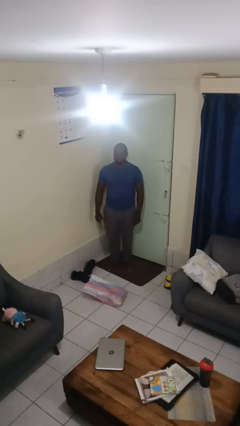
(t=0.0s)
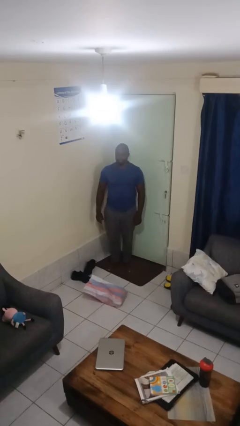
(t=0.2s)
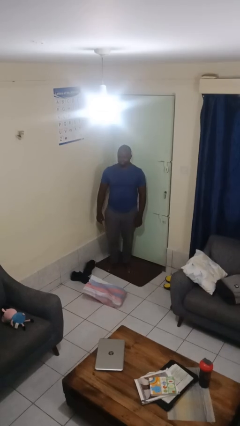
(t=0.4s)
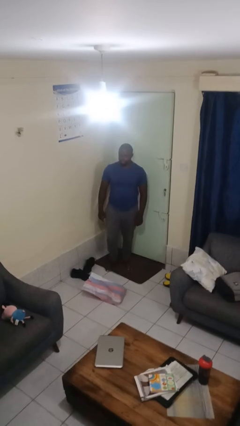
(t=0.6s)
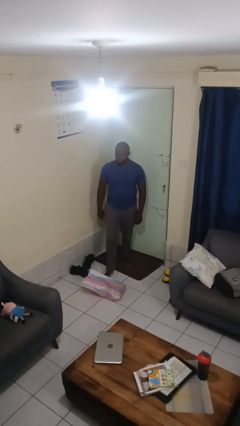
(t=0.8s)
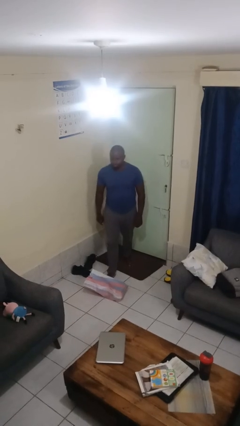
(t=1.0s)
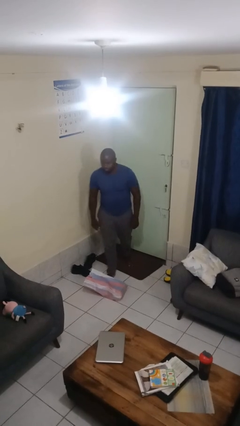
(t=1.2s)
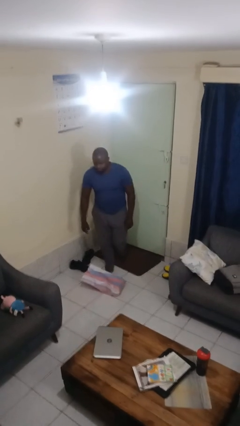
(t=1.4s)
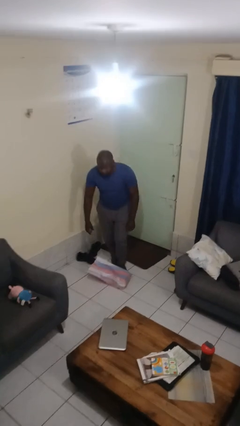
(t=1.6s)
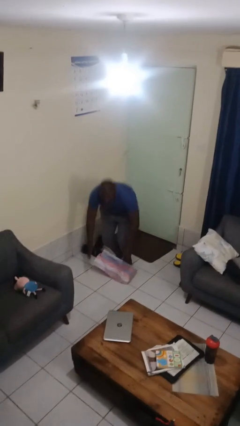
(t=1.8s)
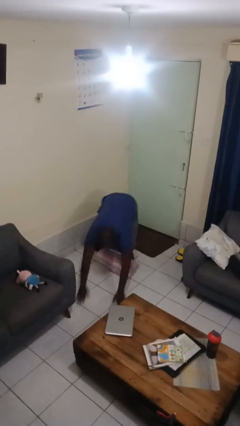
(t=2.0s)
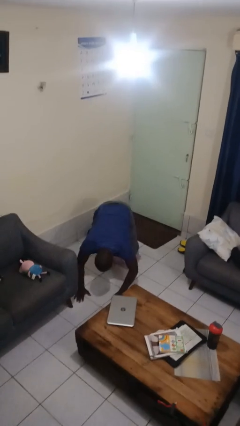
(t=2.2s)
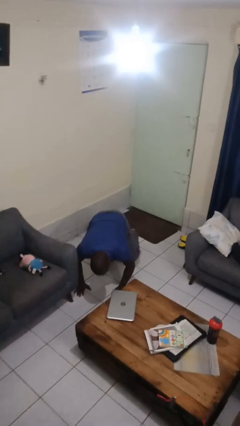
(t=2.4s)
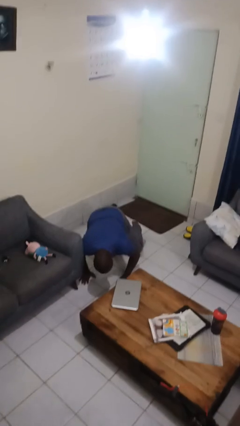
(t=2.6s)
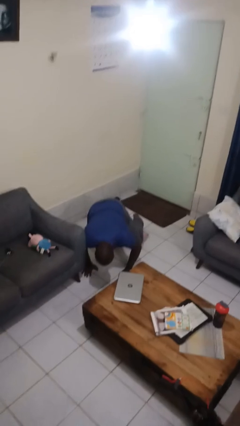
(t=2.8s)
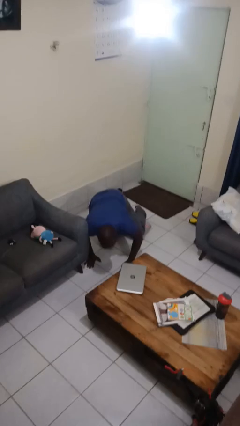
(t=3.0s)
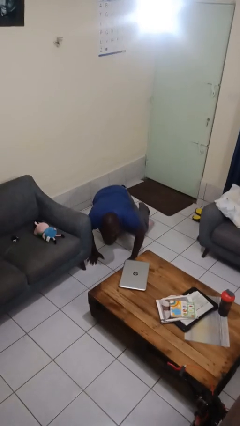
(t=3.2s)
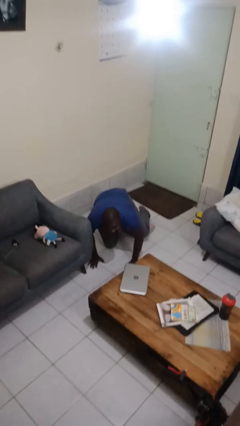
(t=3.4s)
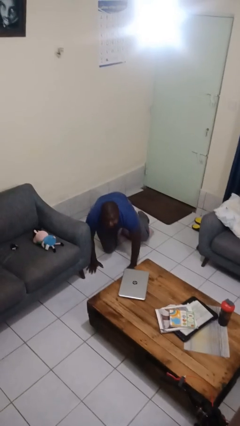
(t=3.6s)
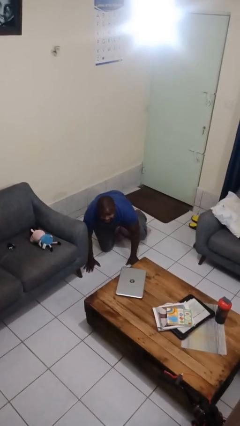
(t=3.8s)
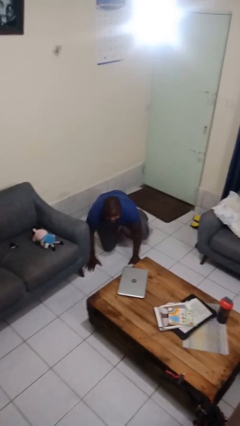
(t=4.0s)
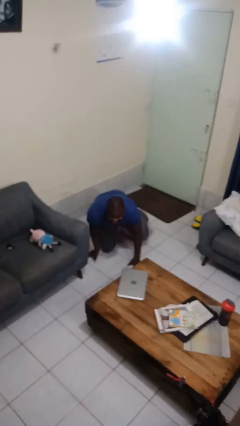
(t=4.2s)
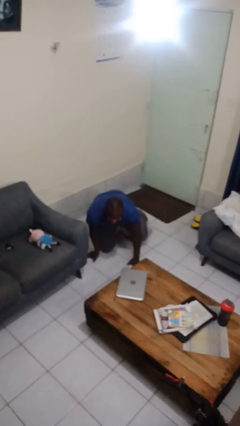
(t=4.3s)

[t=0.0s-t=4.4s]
person trips on object on floor

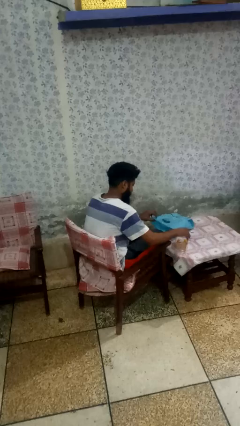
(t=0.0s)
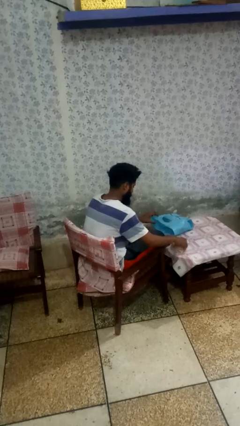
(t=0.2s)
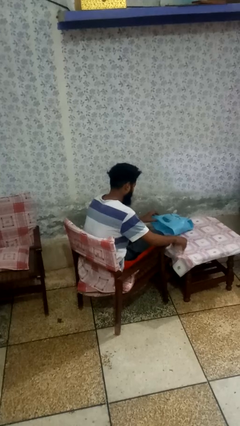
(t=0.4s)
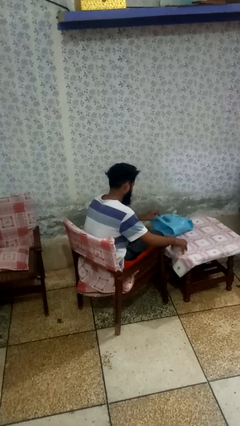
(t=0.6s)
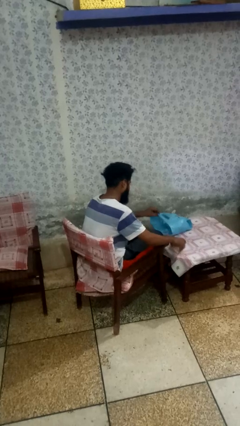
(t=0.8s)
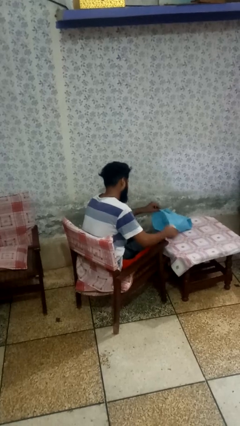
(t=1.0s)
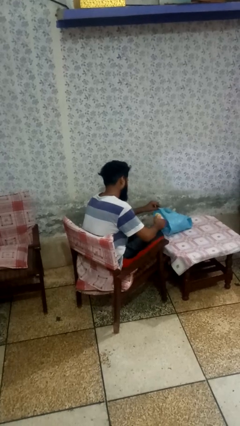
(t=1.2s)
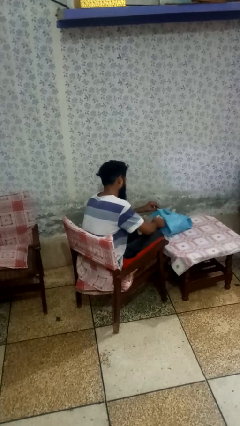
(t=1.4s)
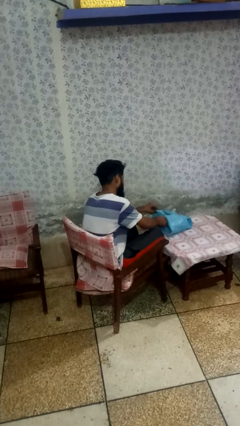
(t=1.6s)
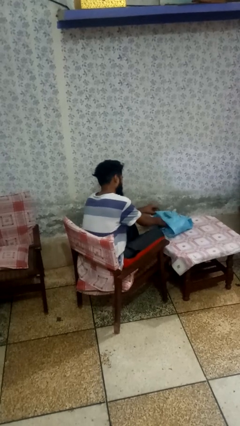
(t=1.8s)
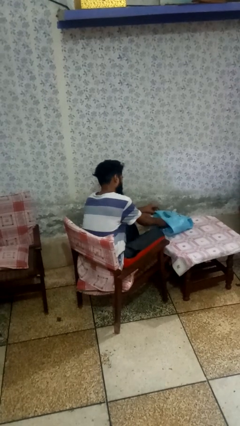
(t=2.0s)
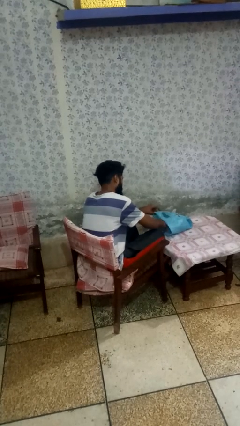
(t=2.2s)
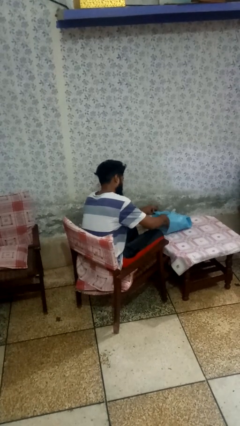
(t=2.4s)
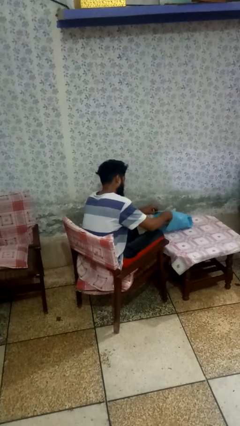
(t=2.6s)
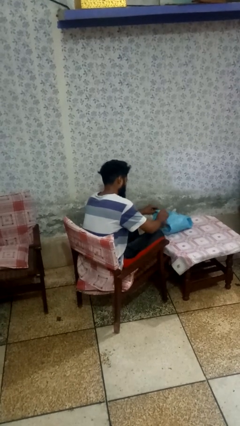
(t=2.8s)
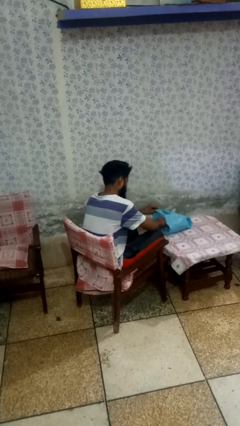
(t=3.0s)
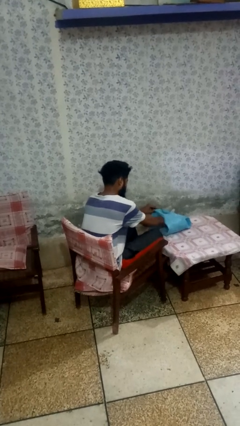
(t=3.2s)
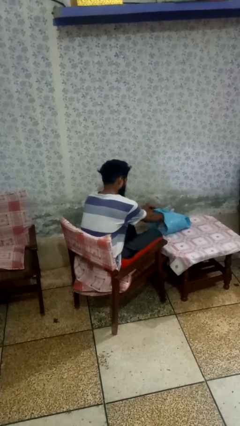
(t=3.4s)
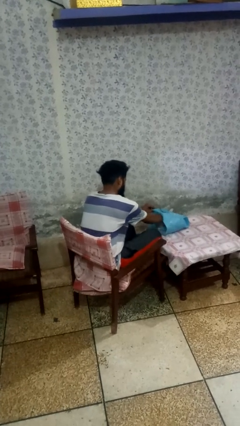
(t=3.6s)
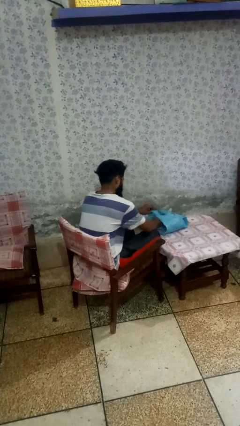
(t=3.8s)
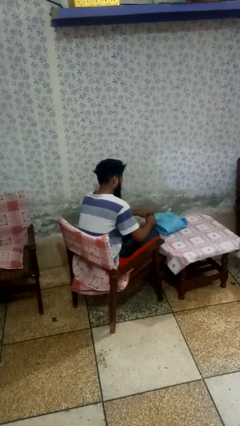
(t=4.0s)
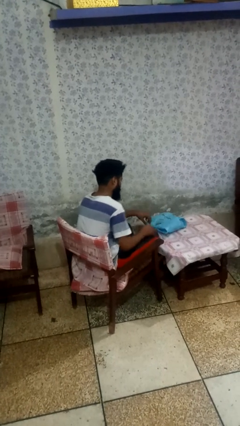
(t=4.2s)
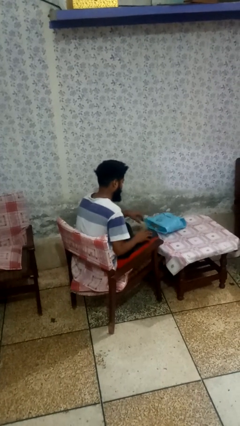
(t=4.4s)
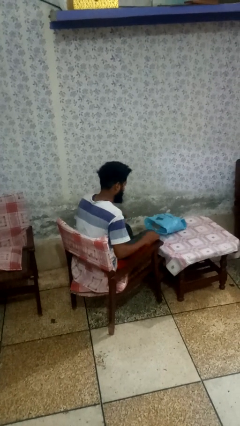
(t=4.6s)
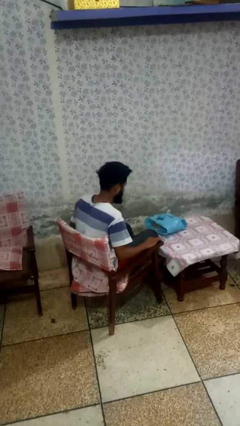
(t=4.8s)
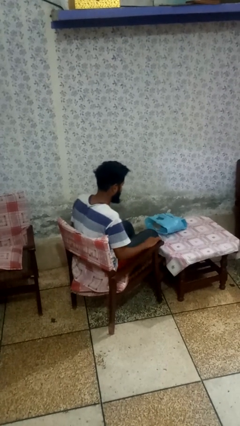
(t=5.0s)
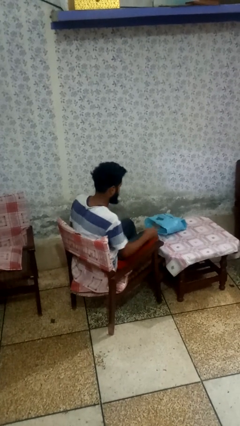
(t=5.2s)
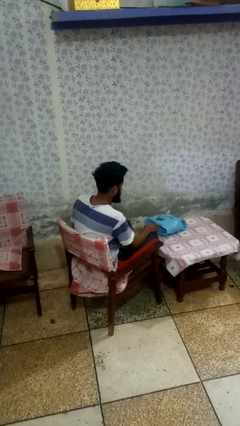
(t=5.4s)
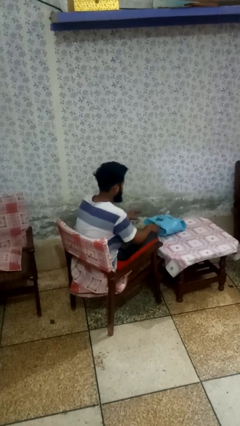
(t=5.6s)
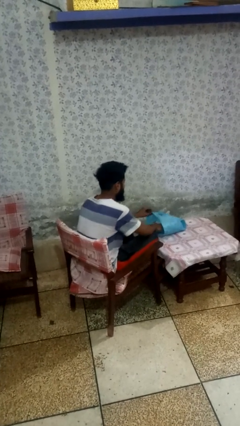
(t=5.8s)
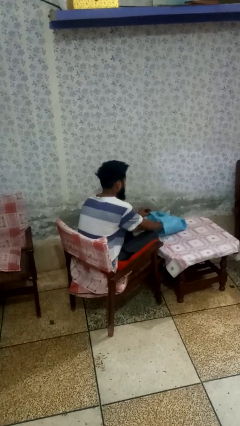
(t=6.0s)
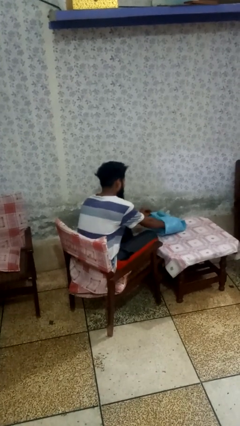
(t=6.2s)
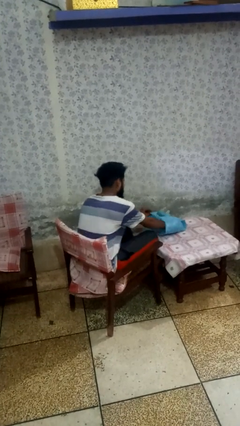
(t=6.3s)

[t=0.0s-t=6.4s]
person puts object into bag

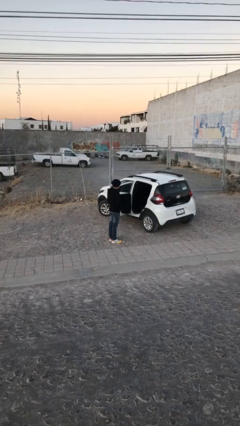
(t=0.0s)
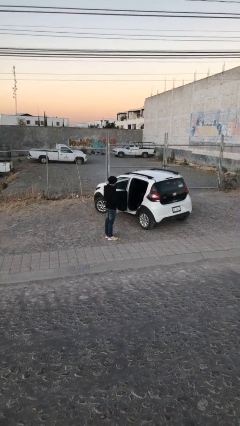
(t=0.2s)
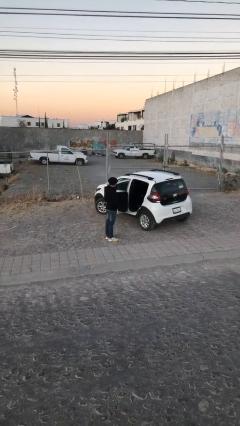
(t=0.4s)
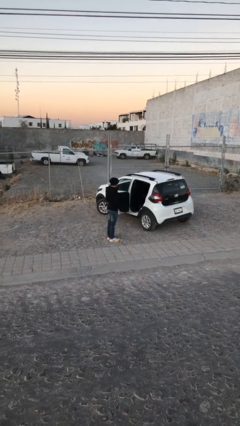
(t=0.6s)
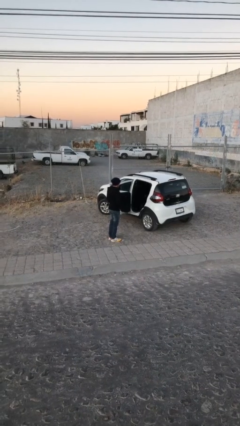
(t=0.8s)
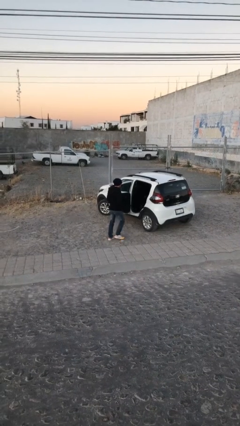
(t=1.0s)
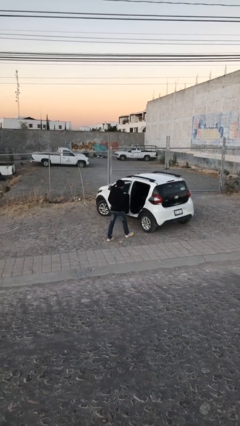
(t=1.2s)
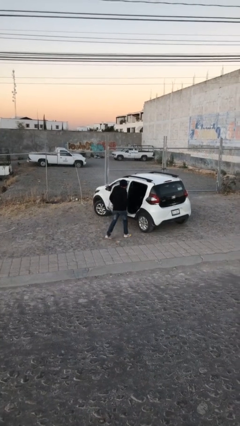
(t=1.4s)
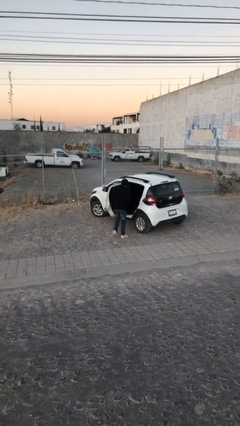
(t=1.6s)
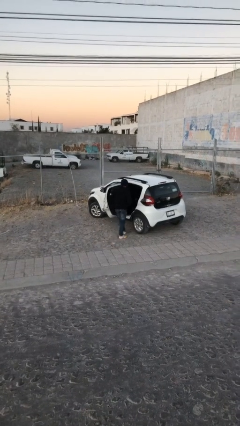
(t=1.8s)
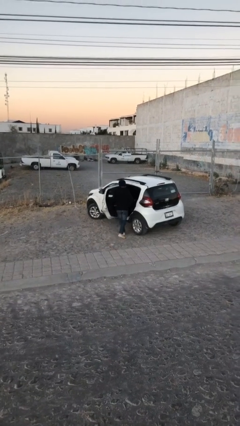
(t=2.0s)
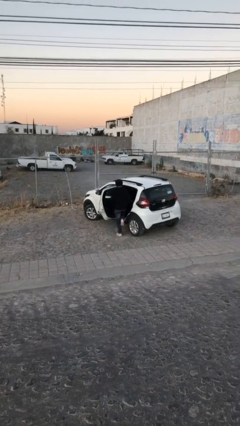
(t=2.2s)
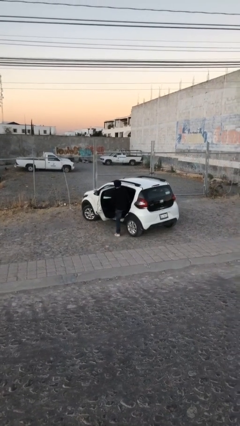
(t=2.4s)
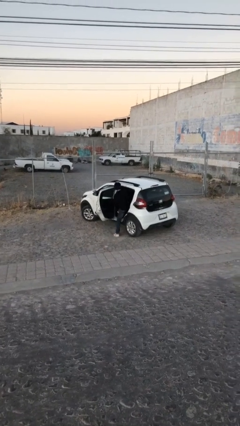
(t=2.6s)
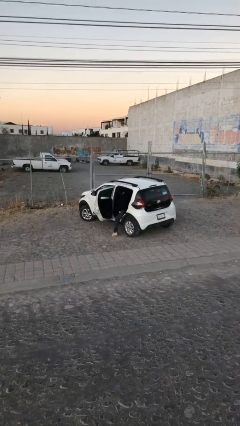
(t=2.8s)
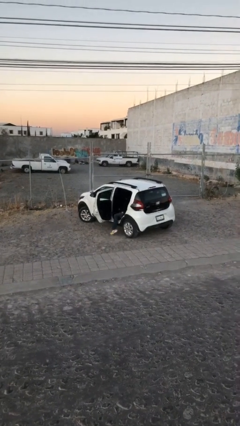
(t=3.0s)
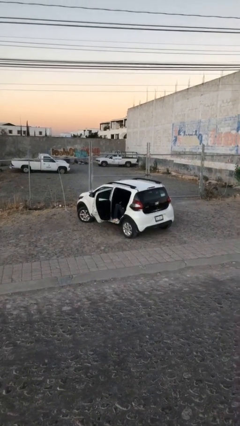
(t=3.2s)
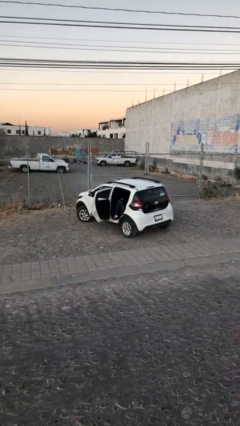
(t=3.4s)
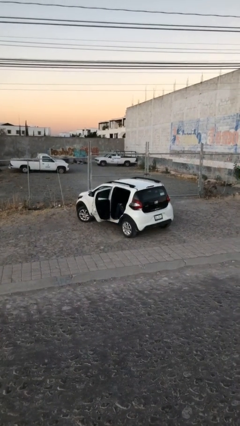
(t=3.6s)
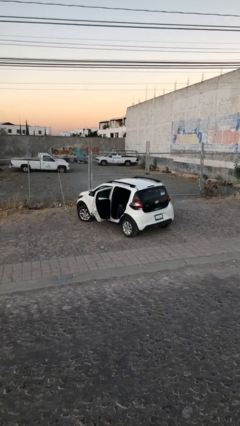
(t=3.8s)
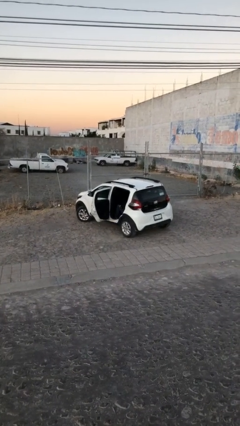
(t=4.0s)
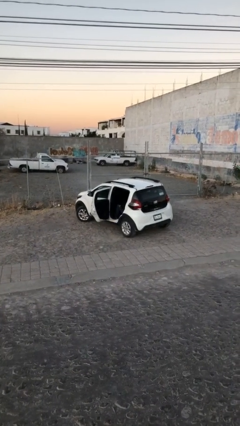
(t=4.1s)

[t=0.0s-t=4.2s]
person enters car

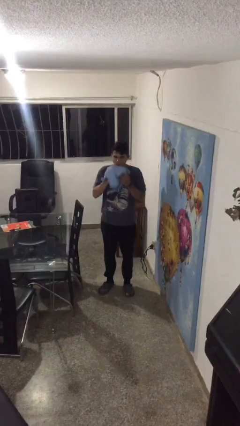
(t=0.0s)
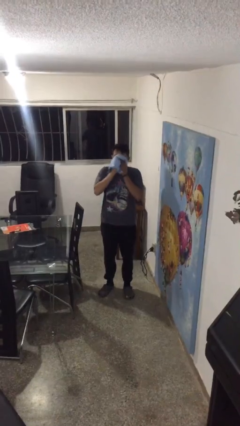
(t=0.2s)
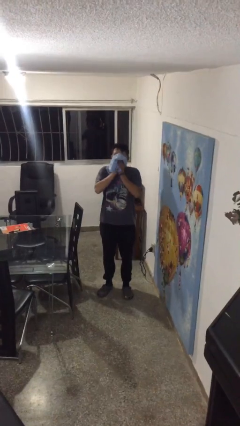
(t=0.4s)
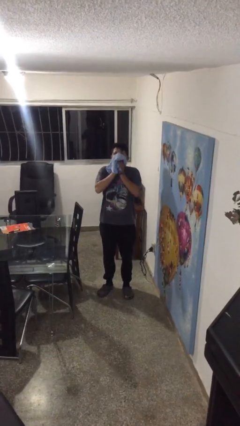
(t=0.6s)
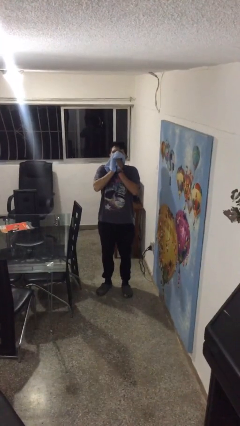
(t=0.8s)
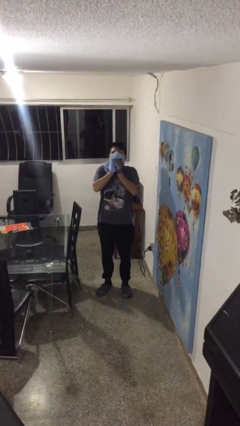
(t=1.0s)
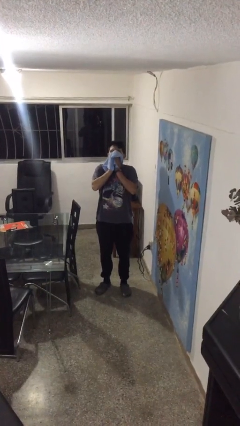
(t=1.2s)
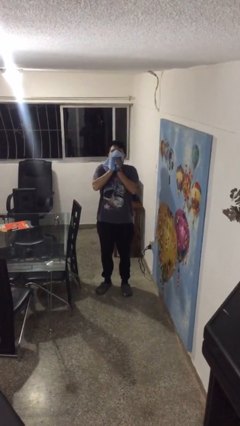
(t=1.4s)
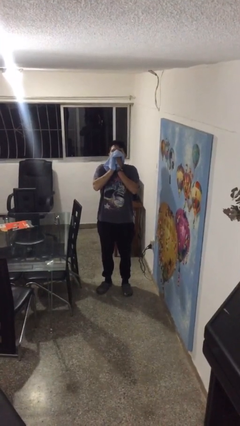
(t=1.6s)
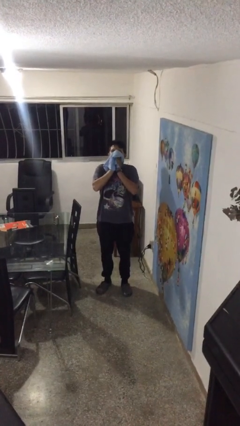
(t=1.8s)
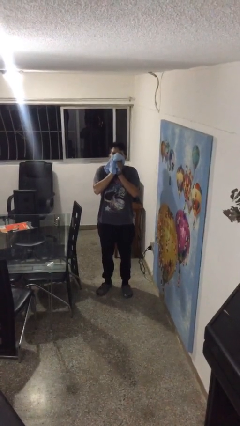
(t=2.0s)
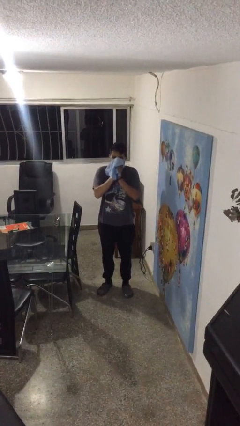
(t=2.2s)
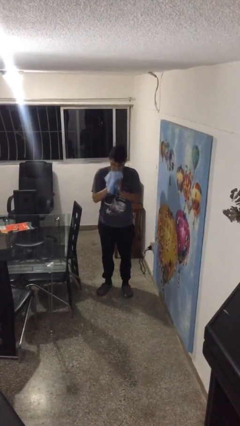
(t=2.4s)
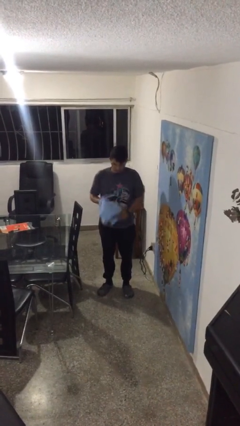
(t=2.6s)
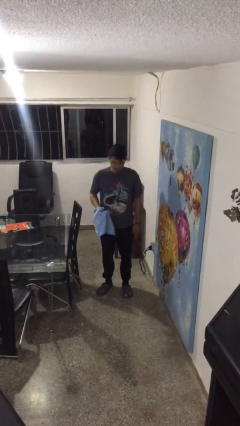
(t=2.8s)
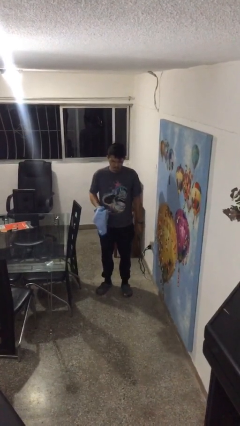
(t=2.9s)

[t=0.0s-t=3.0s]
person blows nose
